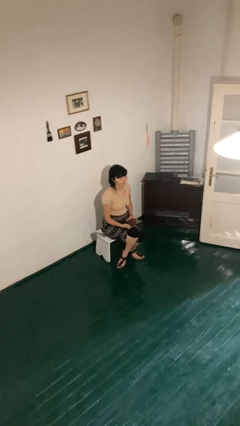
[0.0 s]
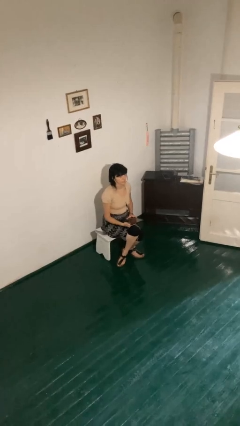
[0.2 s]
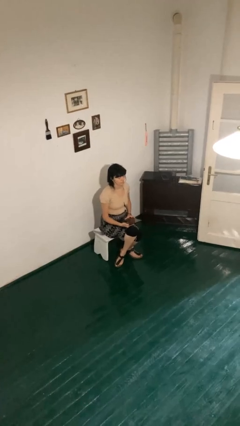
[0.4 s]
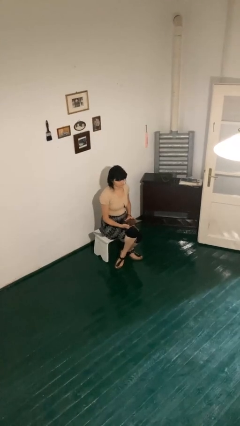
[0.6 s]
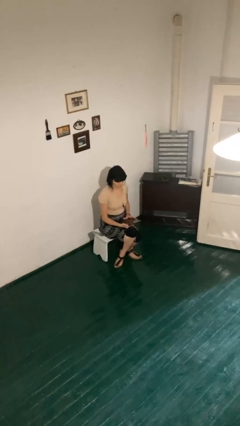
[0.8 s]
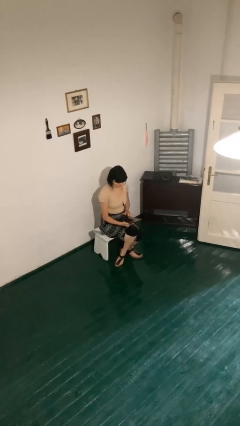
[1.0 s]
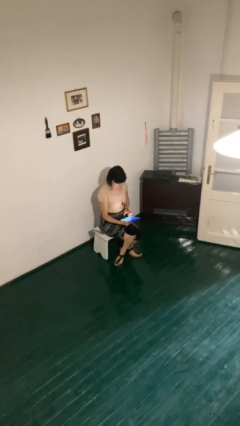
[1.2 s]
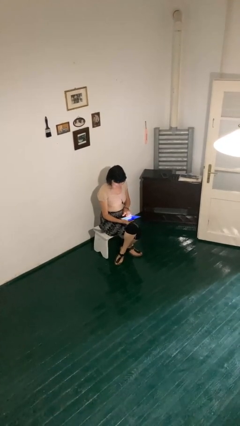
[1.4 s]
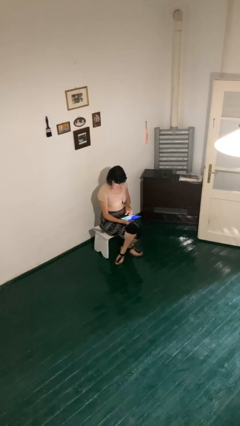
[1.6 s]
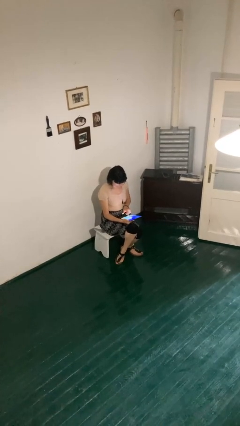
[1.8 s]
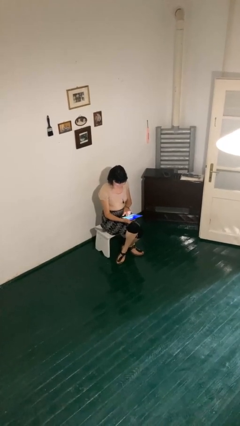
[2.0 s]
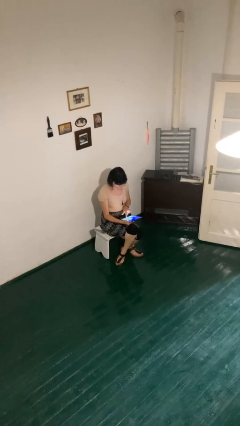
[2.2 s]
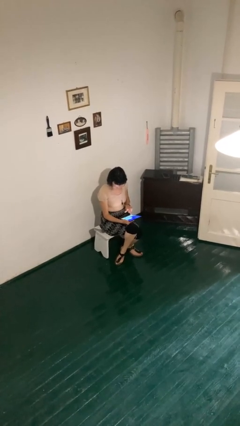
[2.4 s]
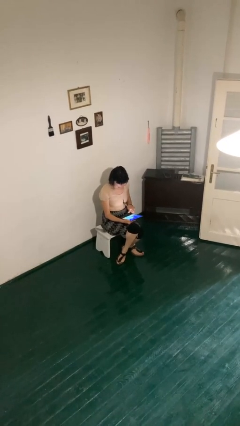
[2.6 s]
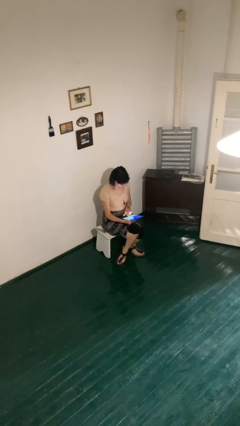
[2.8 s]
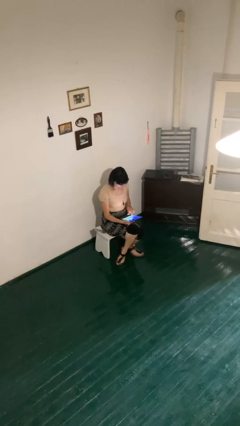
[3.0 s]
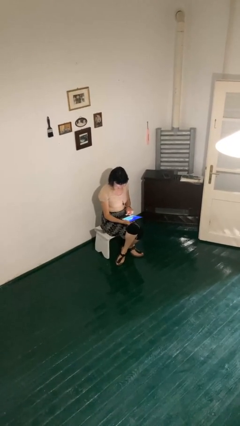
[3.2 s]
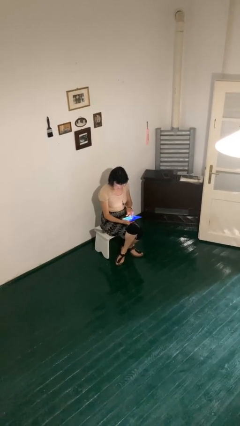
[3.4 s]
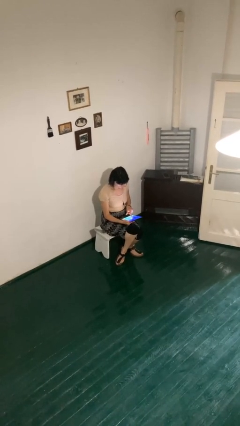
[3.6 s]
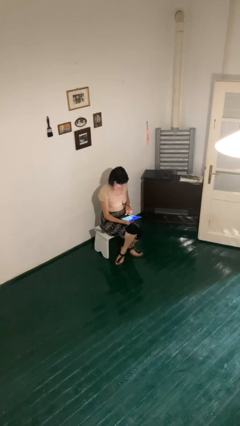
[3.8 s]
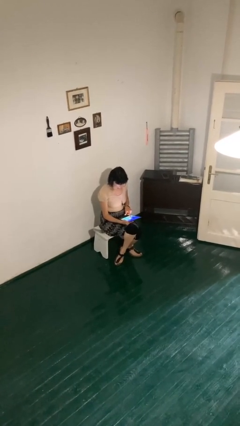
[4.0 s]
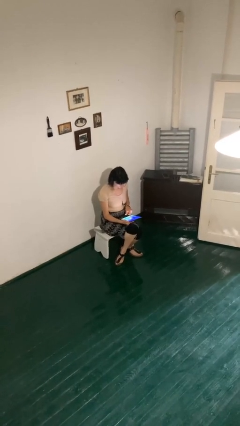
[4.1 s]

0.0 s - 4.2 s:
person interacts with tablet

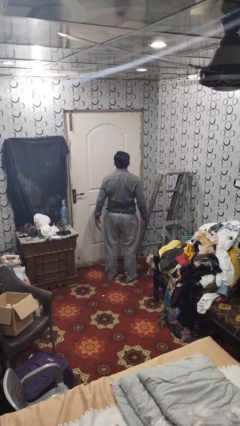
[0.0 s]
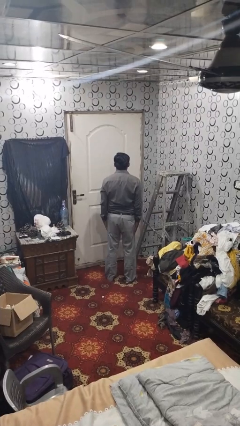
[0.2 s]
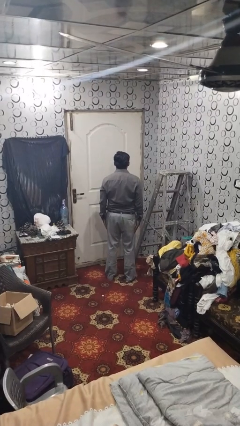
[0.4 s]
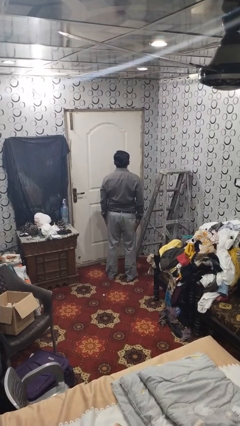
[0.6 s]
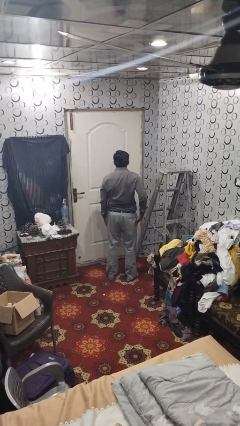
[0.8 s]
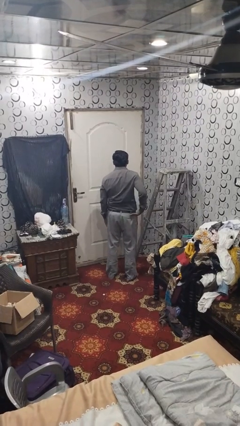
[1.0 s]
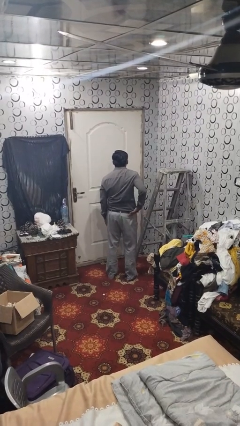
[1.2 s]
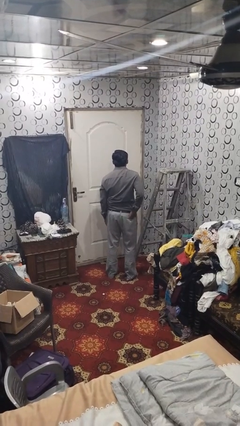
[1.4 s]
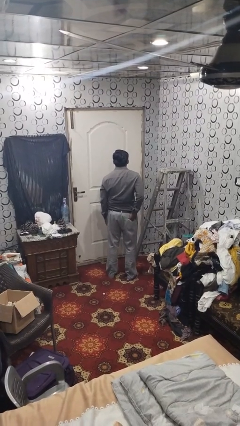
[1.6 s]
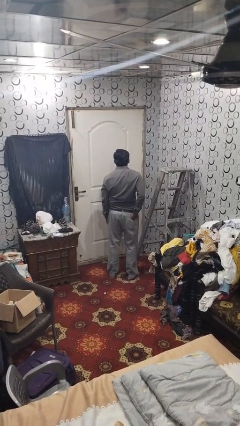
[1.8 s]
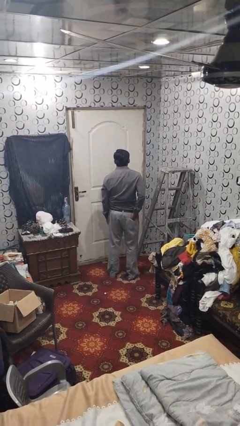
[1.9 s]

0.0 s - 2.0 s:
person puts hands in back pockets

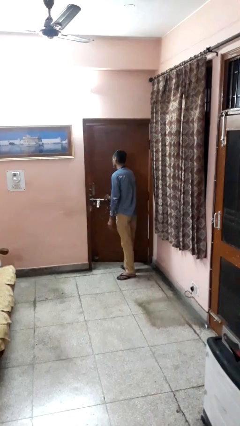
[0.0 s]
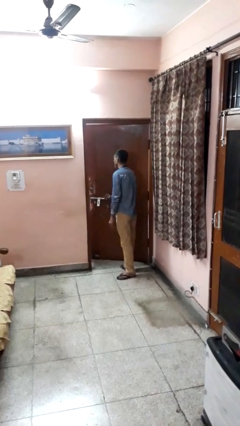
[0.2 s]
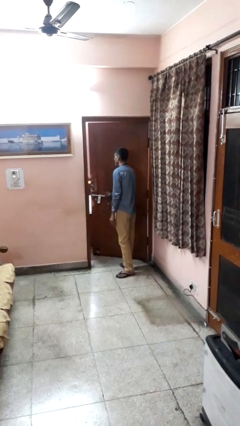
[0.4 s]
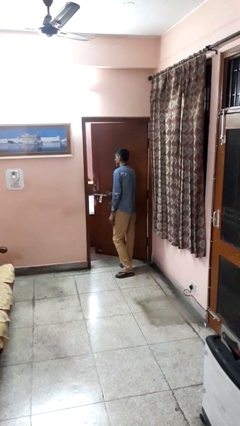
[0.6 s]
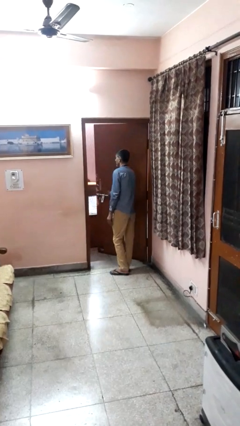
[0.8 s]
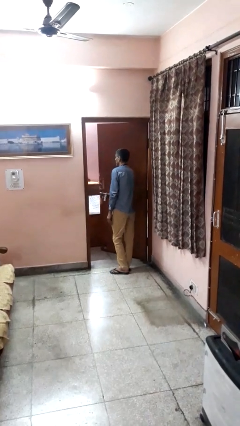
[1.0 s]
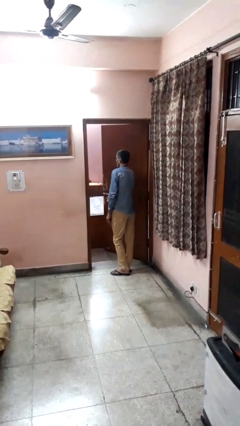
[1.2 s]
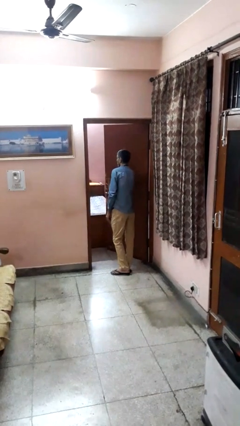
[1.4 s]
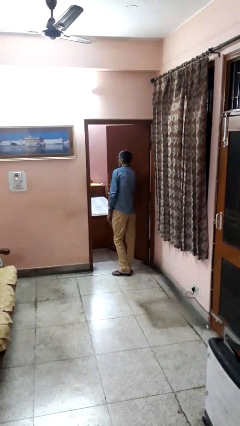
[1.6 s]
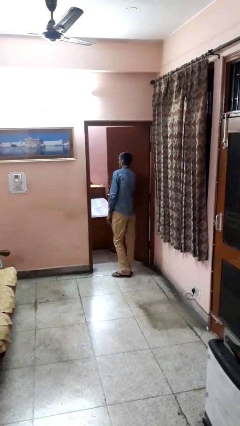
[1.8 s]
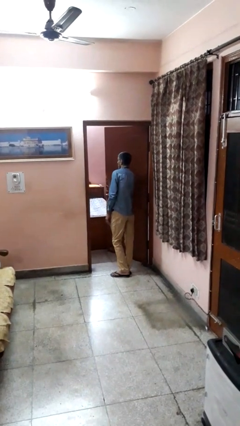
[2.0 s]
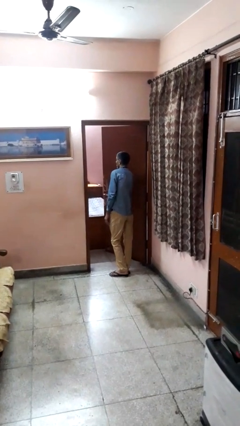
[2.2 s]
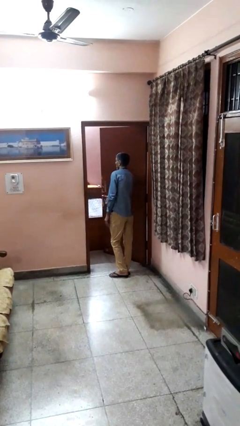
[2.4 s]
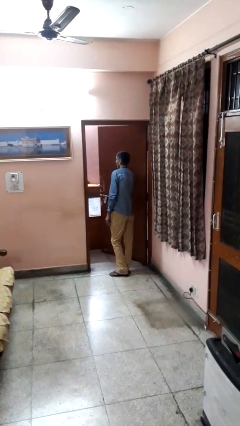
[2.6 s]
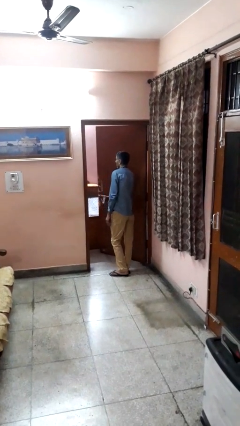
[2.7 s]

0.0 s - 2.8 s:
person opens facility door

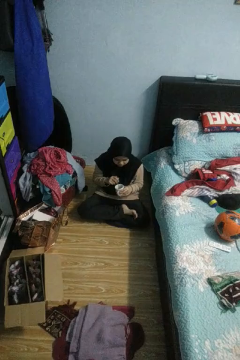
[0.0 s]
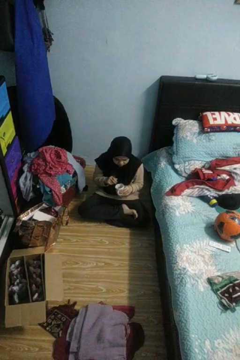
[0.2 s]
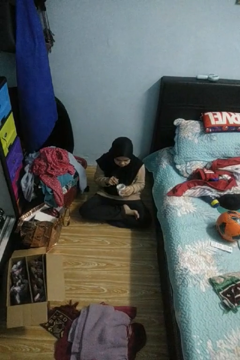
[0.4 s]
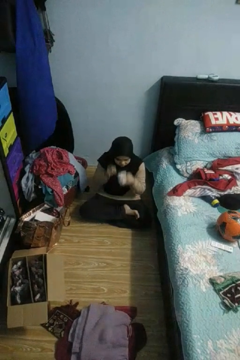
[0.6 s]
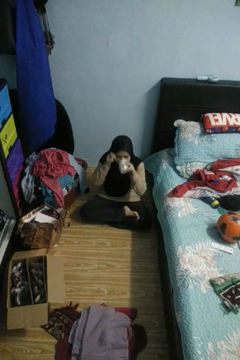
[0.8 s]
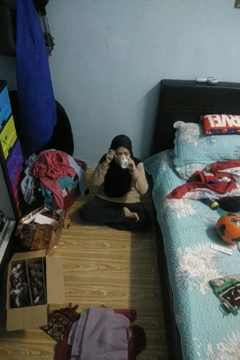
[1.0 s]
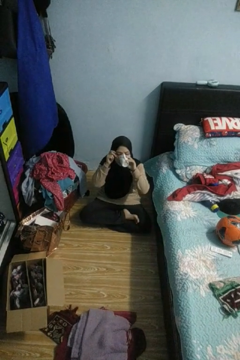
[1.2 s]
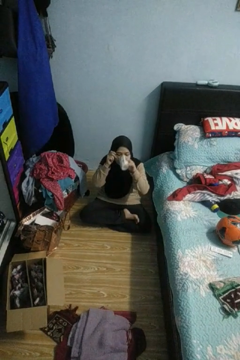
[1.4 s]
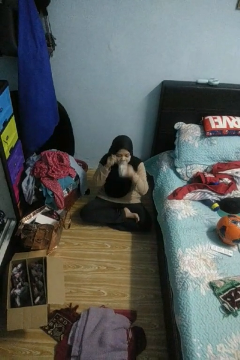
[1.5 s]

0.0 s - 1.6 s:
person drinks from mug

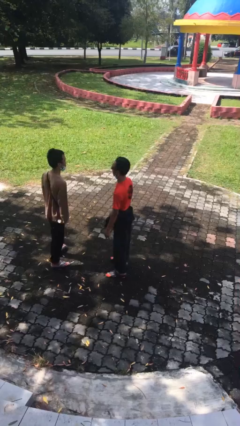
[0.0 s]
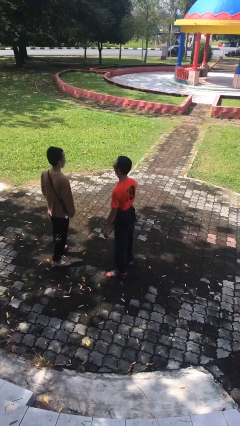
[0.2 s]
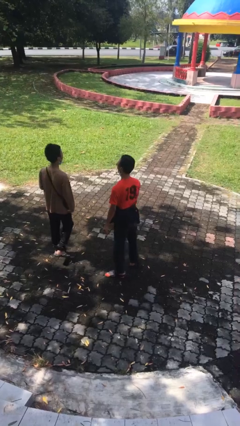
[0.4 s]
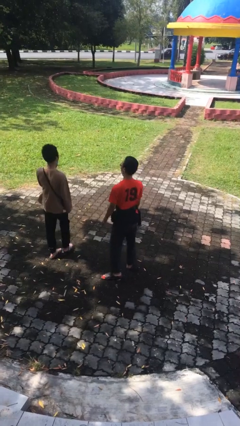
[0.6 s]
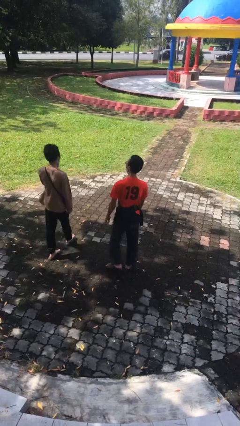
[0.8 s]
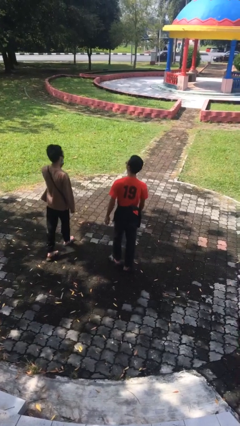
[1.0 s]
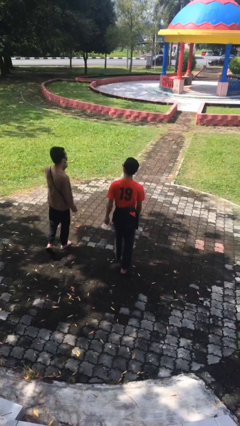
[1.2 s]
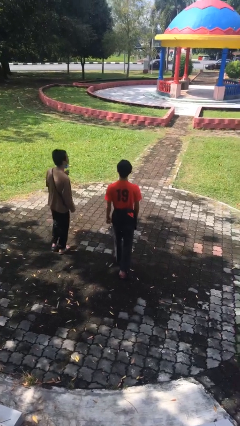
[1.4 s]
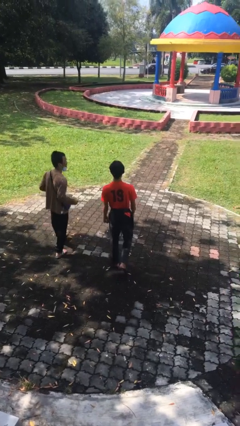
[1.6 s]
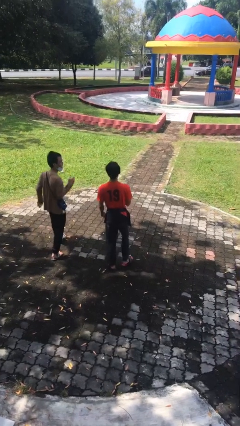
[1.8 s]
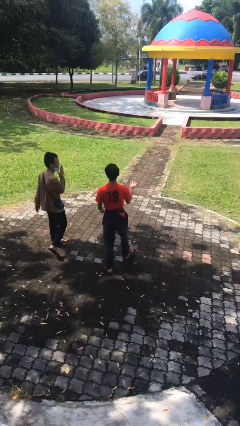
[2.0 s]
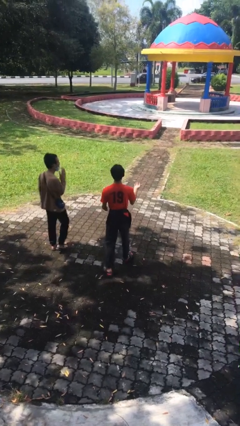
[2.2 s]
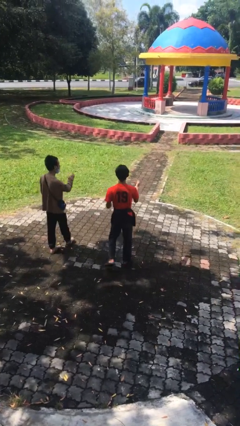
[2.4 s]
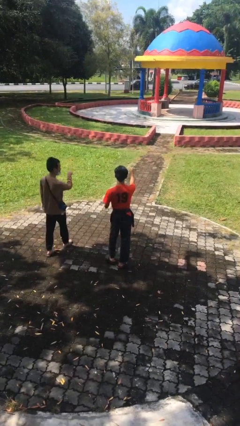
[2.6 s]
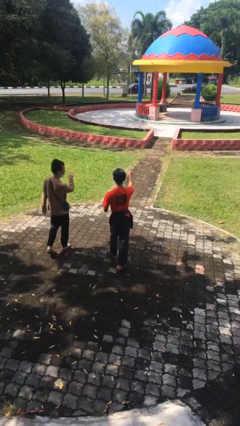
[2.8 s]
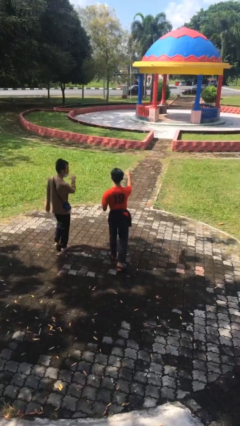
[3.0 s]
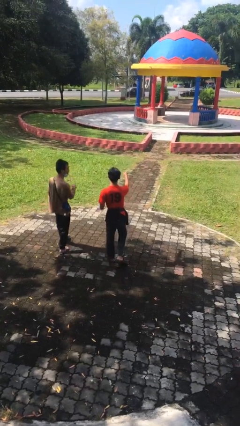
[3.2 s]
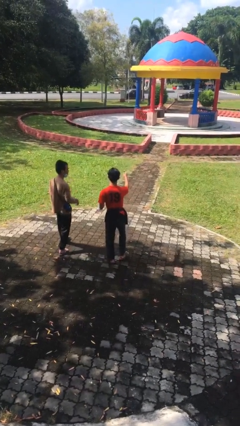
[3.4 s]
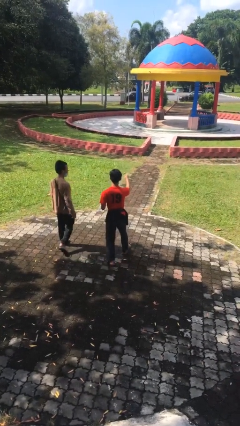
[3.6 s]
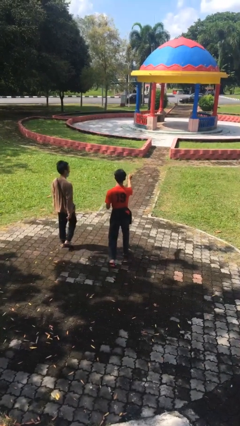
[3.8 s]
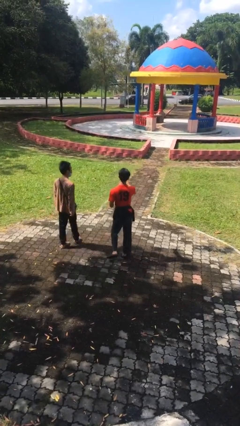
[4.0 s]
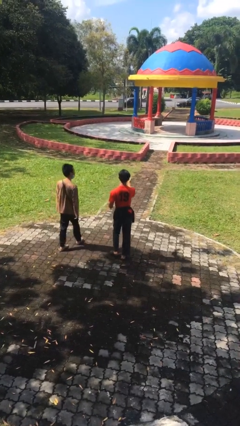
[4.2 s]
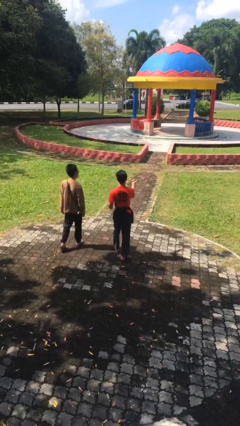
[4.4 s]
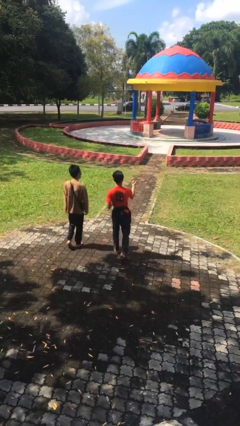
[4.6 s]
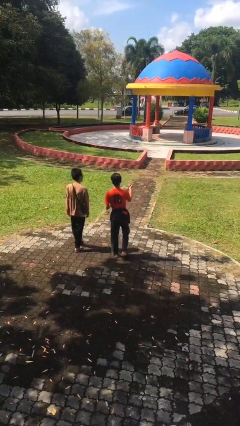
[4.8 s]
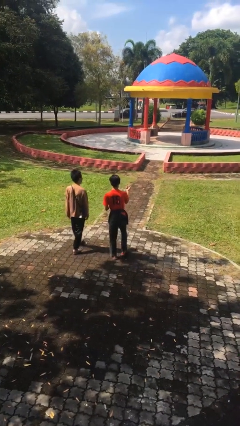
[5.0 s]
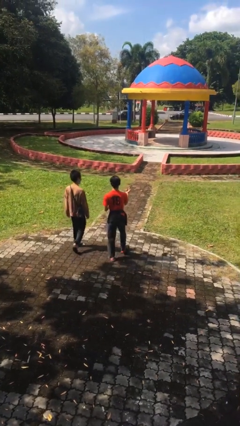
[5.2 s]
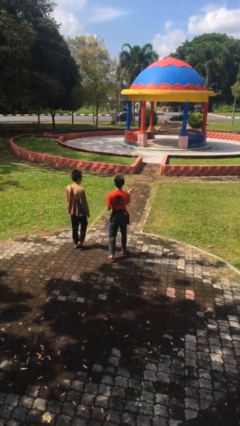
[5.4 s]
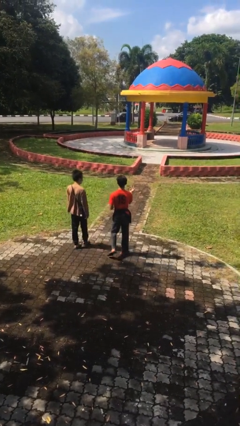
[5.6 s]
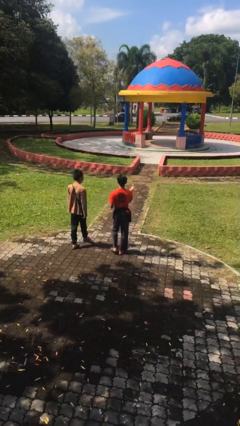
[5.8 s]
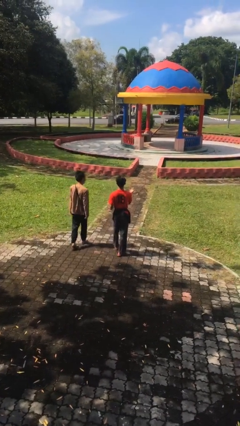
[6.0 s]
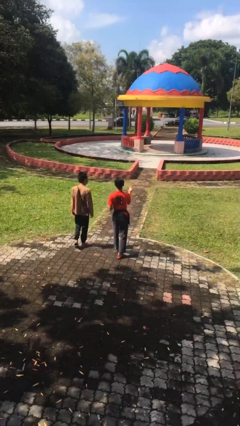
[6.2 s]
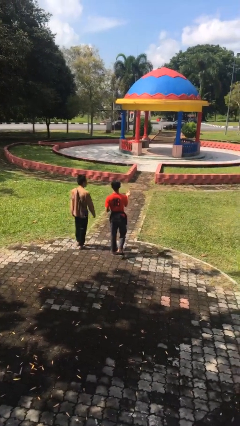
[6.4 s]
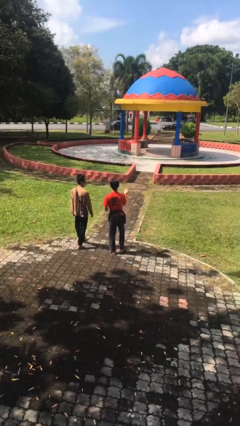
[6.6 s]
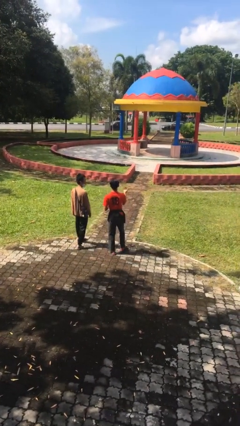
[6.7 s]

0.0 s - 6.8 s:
person talks to person

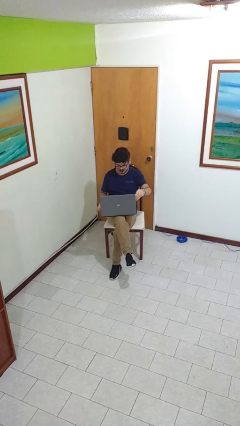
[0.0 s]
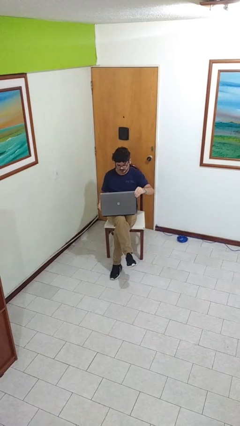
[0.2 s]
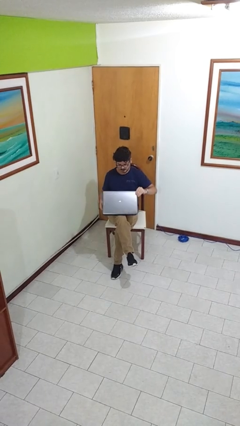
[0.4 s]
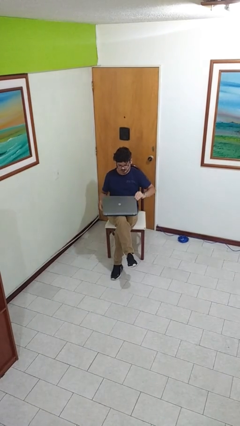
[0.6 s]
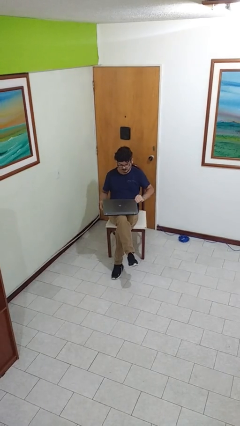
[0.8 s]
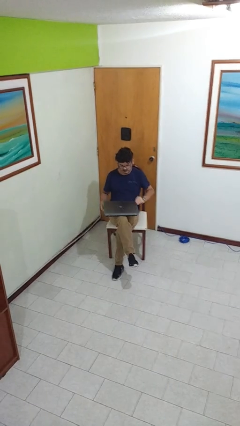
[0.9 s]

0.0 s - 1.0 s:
person closes laptop
